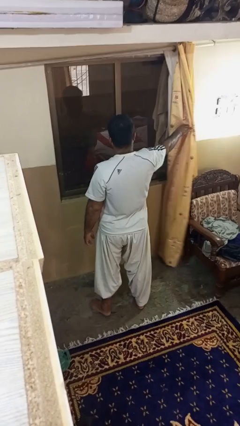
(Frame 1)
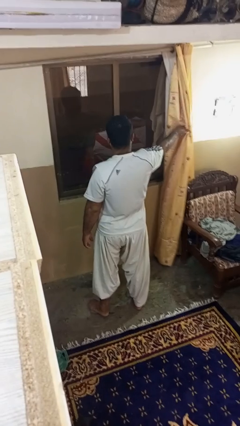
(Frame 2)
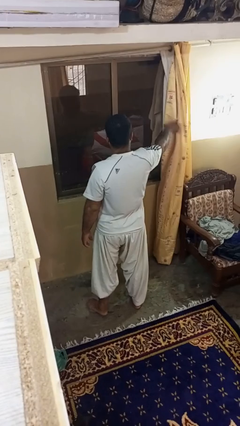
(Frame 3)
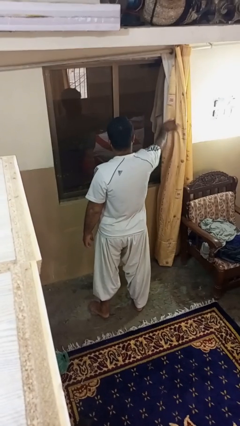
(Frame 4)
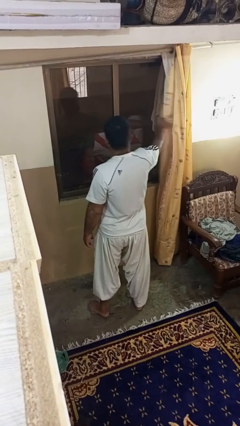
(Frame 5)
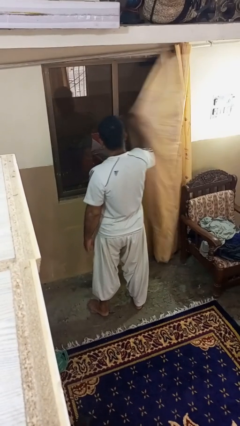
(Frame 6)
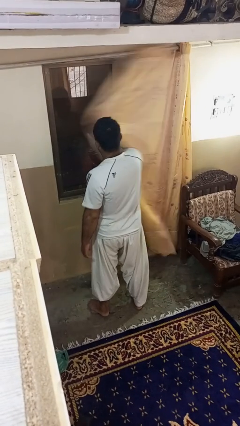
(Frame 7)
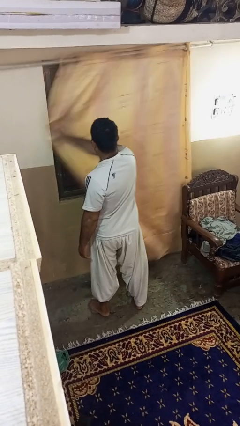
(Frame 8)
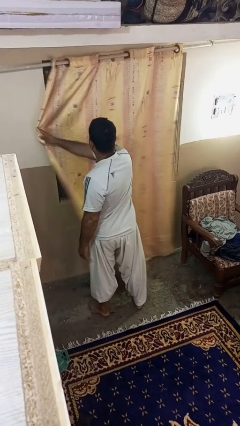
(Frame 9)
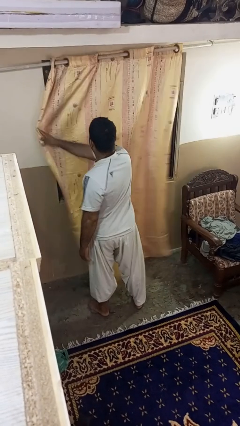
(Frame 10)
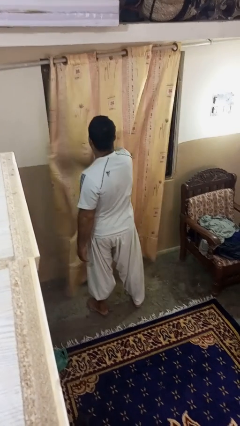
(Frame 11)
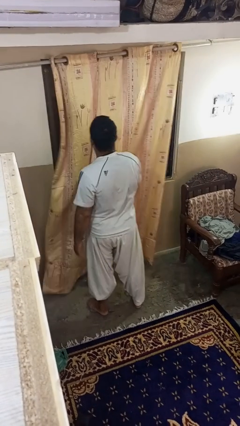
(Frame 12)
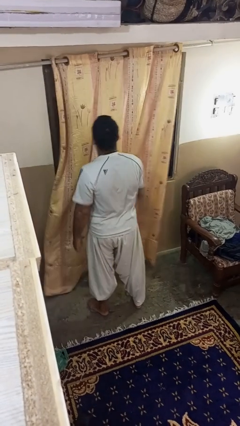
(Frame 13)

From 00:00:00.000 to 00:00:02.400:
person closes curtains

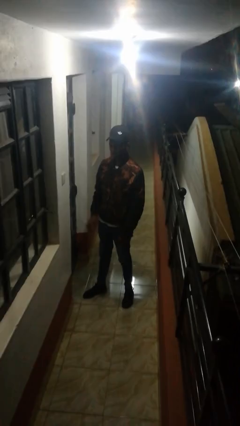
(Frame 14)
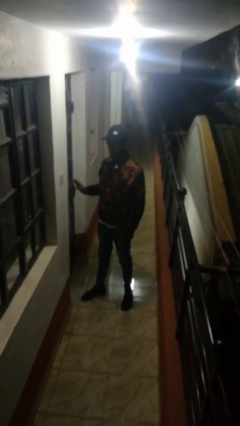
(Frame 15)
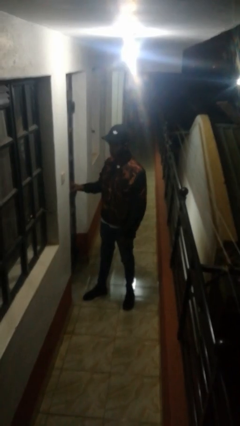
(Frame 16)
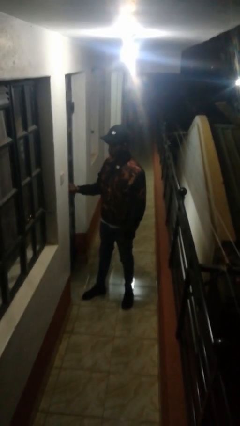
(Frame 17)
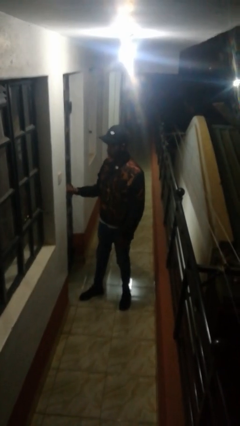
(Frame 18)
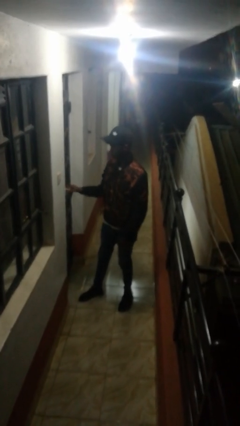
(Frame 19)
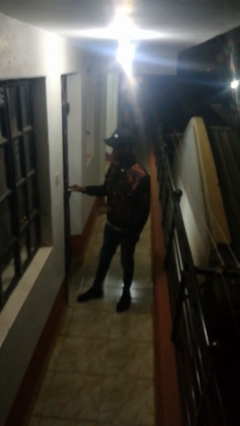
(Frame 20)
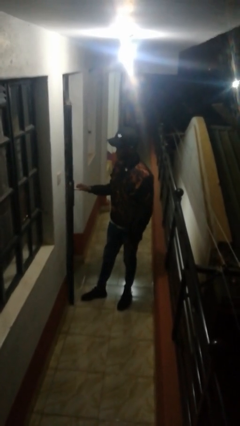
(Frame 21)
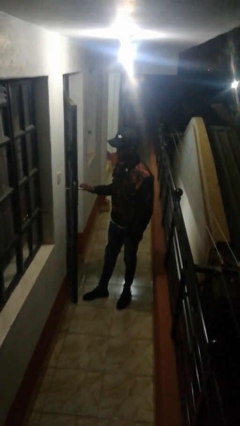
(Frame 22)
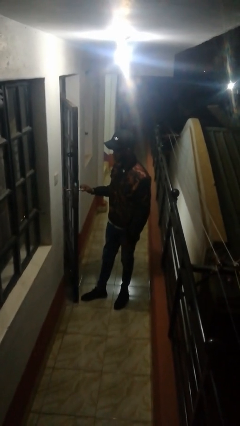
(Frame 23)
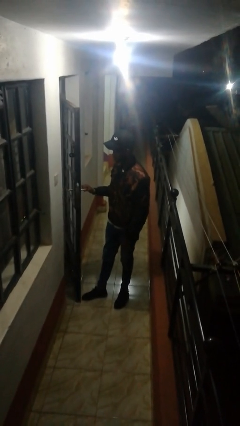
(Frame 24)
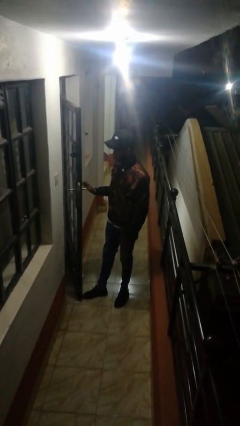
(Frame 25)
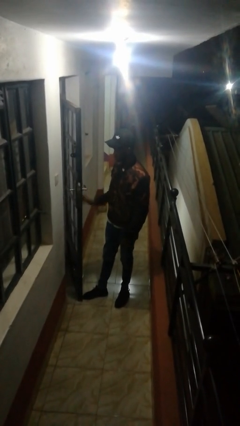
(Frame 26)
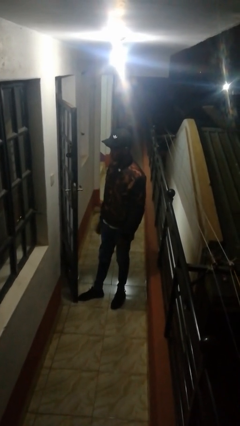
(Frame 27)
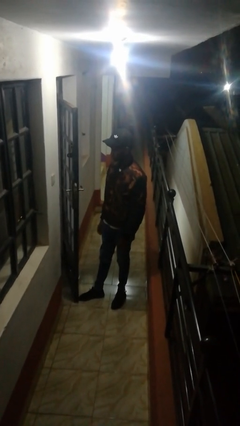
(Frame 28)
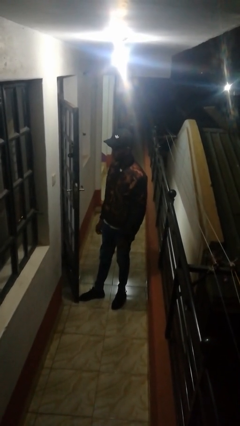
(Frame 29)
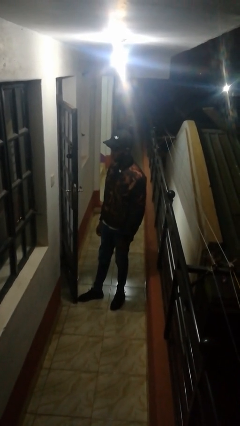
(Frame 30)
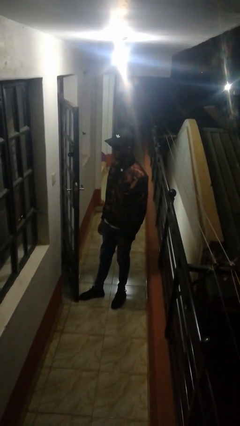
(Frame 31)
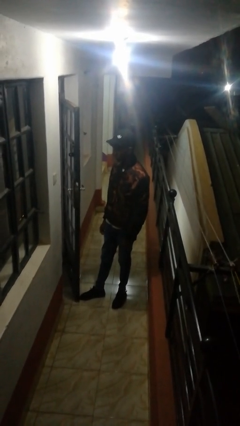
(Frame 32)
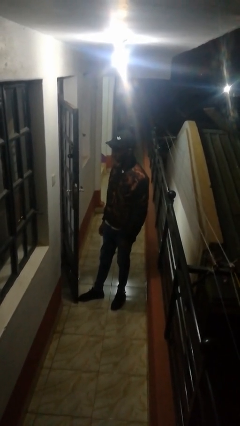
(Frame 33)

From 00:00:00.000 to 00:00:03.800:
person opens facility door

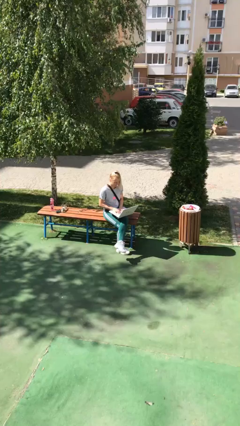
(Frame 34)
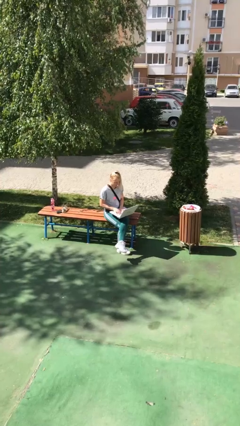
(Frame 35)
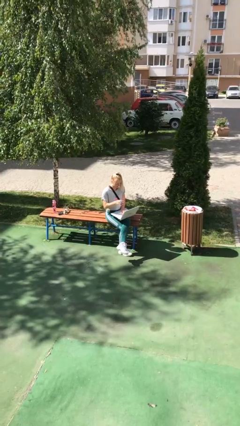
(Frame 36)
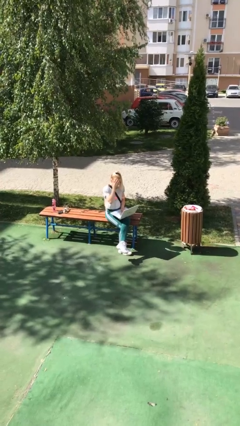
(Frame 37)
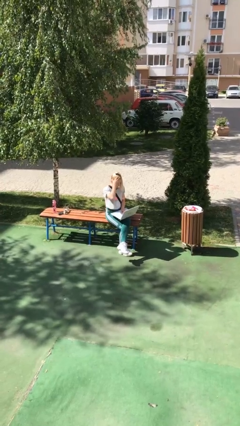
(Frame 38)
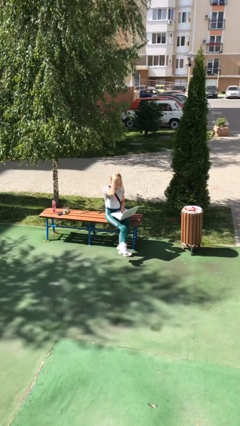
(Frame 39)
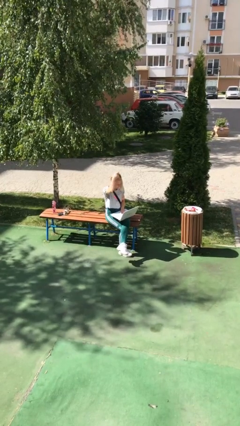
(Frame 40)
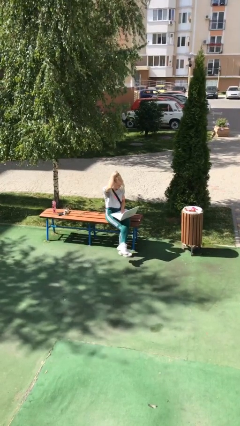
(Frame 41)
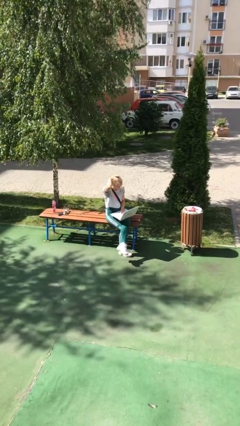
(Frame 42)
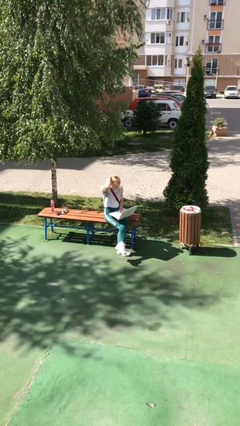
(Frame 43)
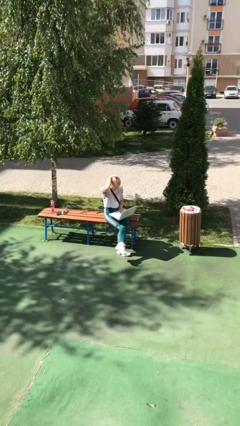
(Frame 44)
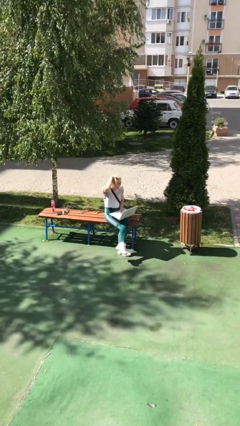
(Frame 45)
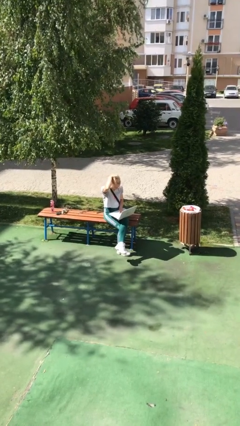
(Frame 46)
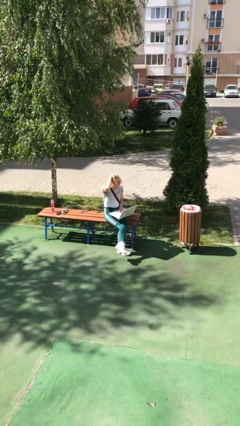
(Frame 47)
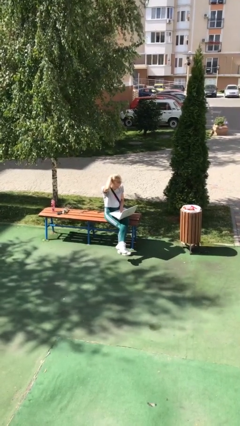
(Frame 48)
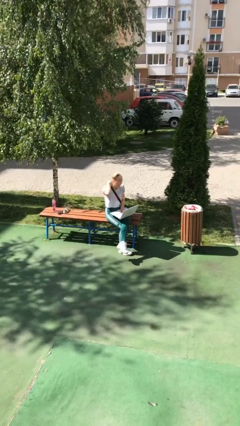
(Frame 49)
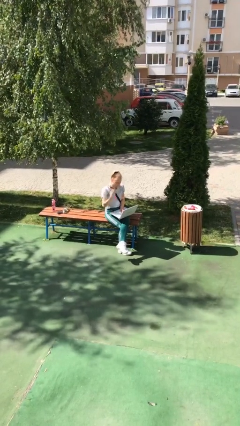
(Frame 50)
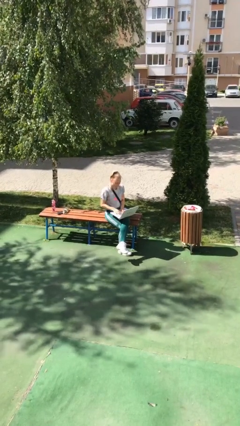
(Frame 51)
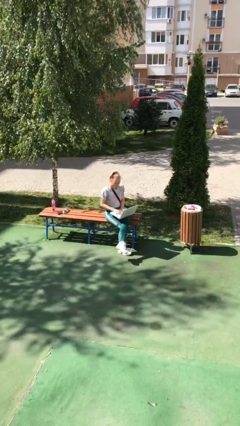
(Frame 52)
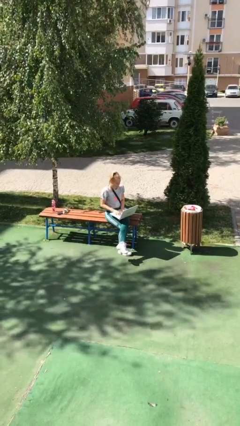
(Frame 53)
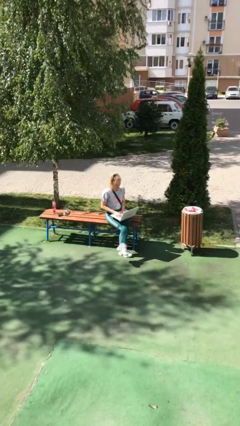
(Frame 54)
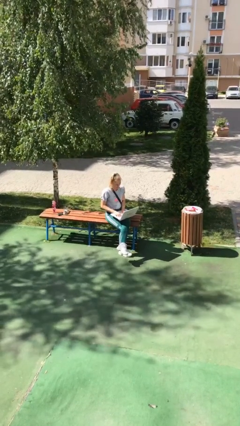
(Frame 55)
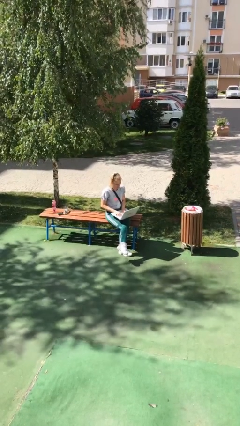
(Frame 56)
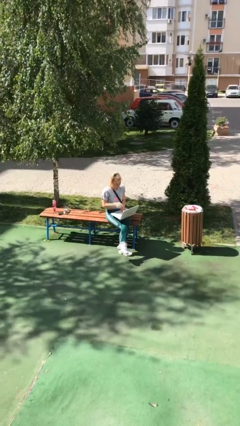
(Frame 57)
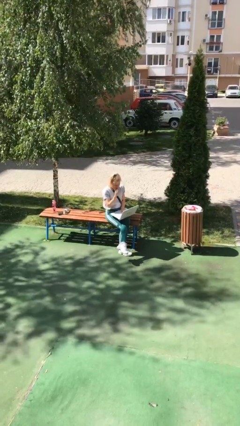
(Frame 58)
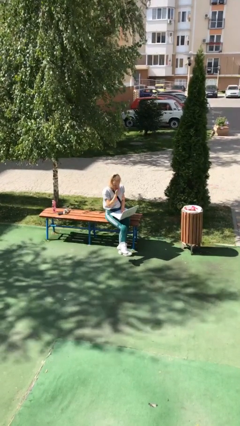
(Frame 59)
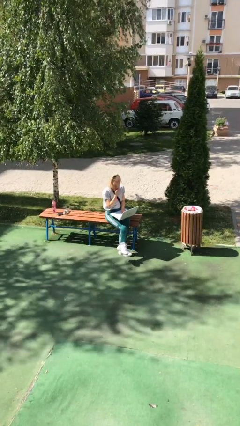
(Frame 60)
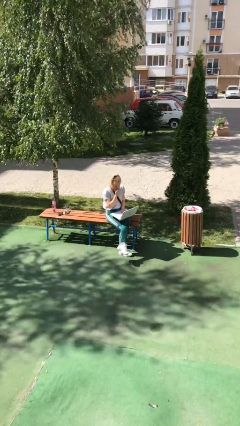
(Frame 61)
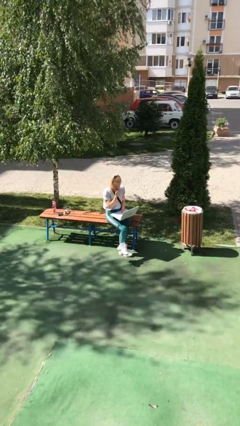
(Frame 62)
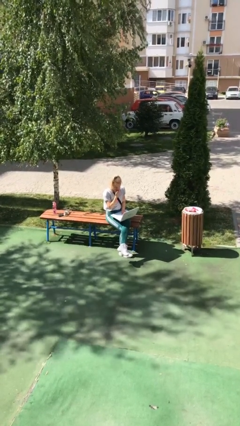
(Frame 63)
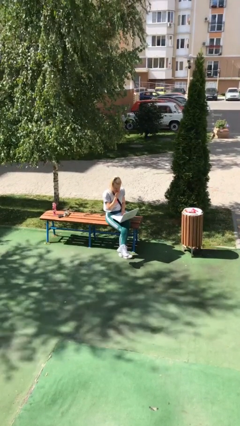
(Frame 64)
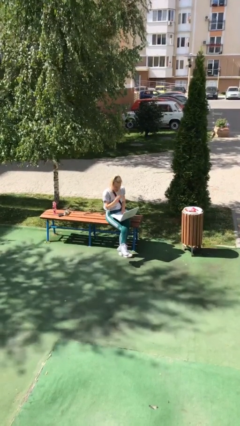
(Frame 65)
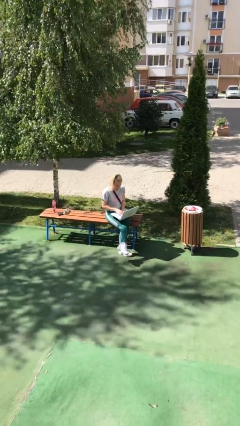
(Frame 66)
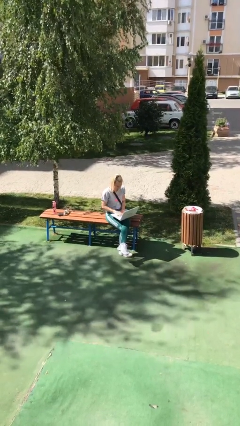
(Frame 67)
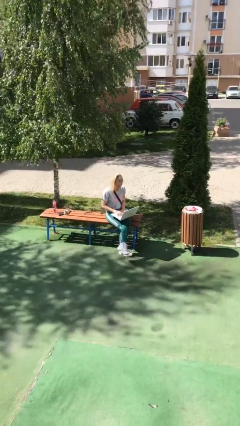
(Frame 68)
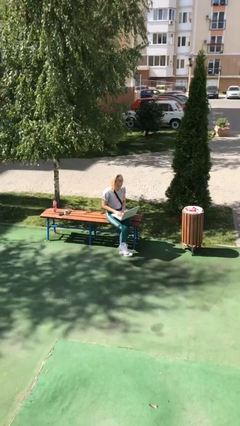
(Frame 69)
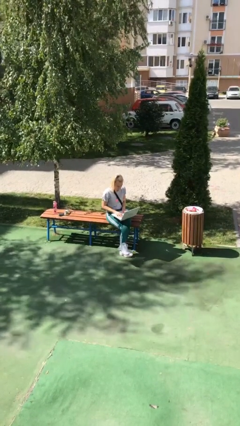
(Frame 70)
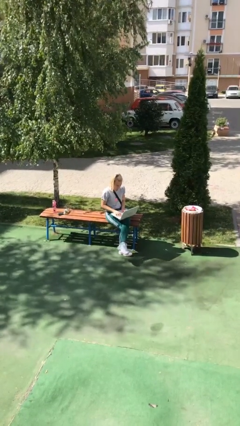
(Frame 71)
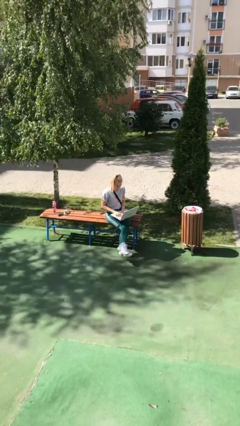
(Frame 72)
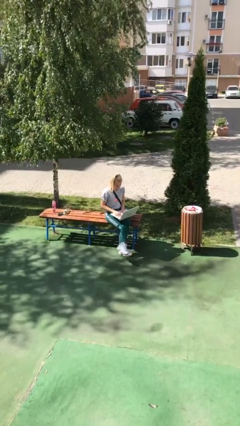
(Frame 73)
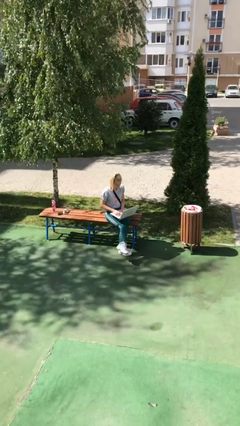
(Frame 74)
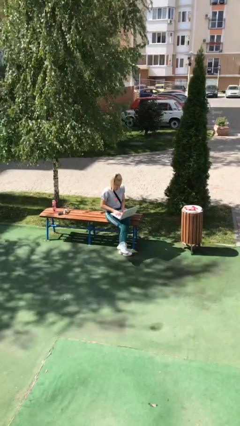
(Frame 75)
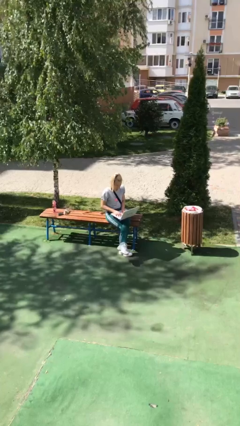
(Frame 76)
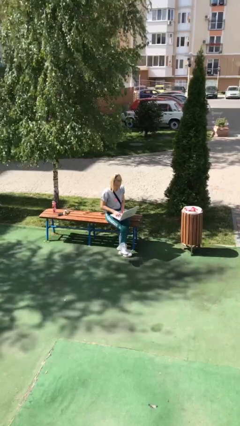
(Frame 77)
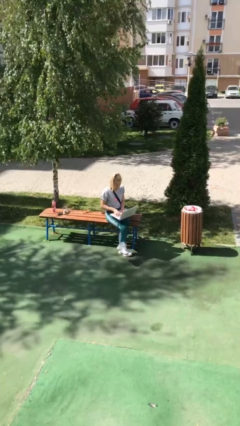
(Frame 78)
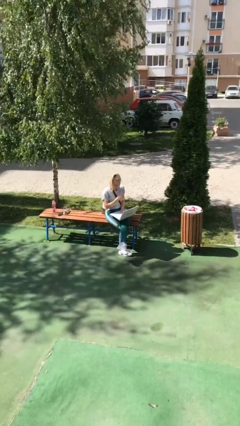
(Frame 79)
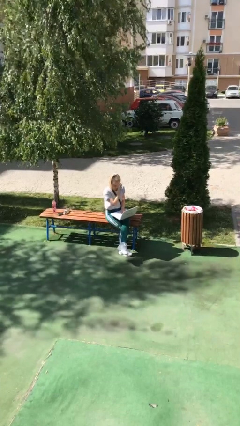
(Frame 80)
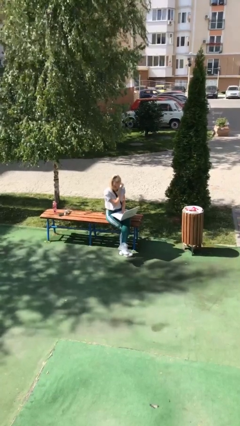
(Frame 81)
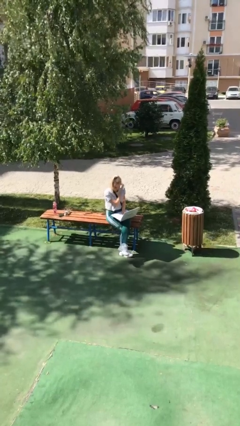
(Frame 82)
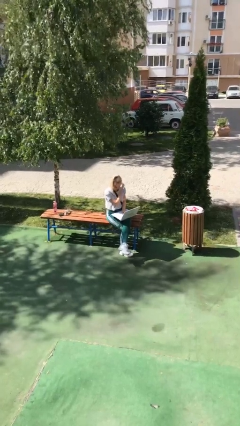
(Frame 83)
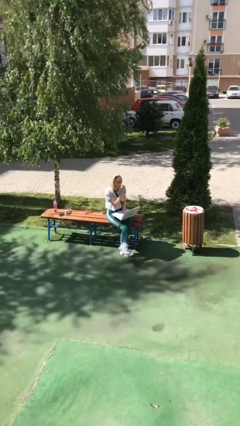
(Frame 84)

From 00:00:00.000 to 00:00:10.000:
person interacts with laptop

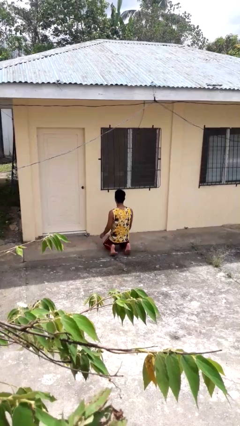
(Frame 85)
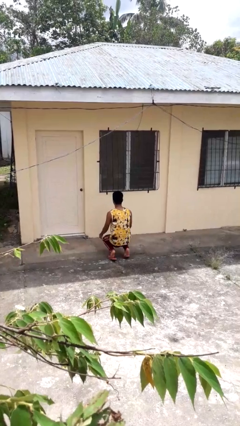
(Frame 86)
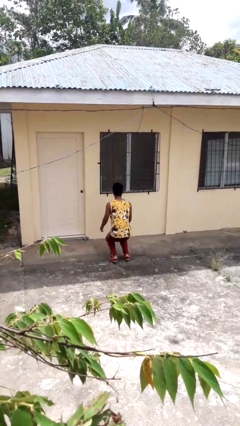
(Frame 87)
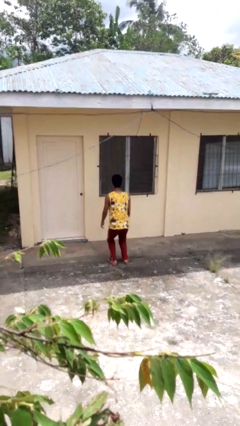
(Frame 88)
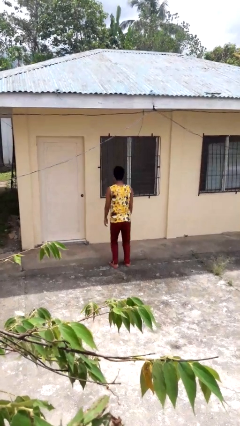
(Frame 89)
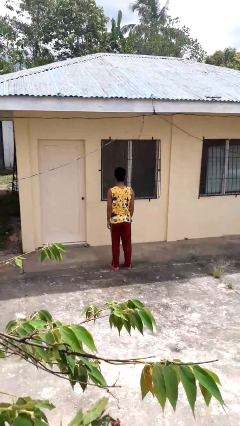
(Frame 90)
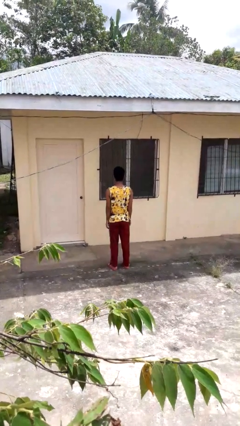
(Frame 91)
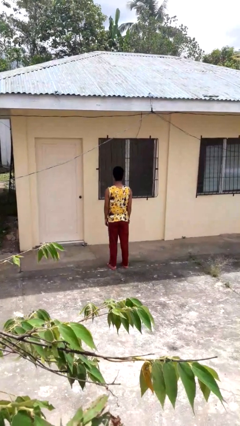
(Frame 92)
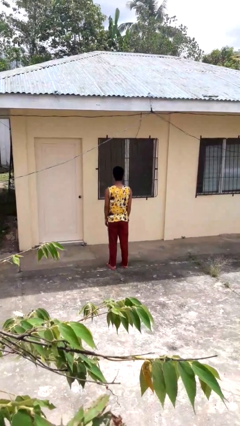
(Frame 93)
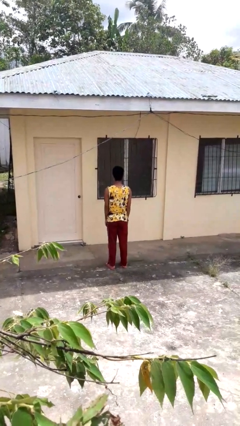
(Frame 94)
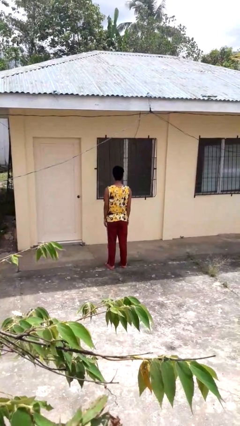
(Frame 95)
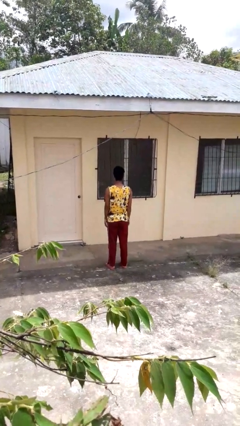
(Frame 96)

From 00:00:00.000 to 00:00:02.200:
person stands up from floor
